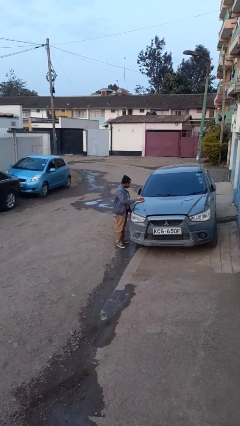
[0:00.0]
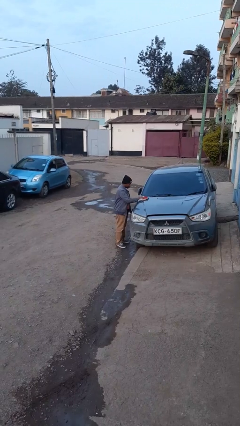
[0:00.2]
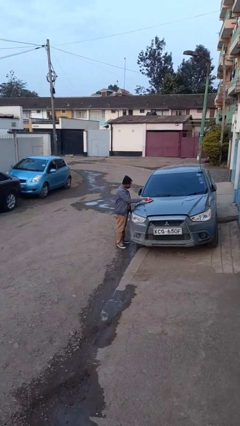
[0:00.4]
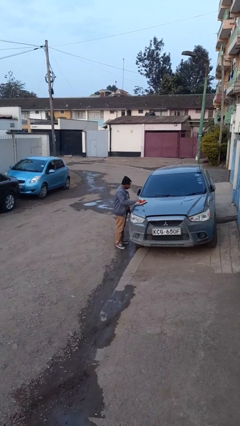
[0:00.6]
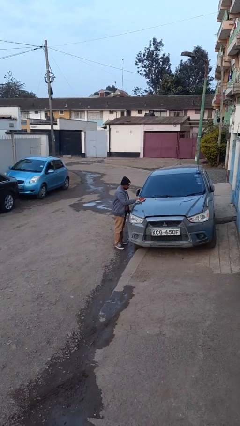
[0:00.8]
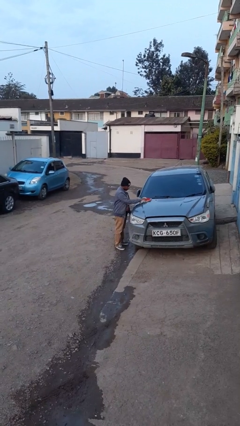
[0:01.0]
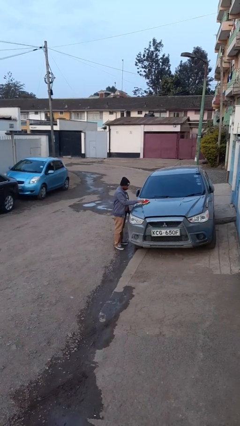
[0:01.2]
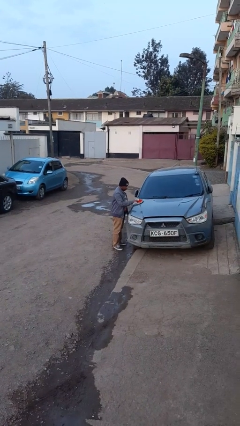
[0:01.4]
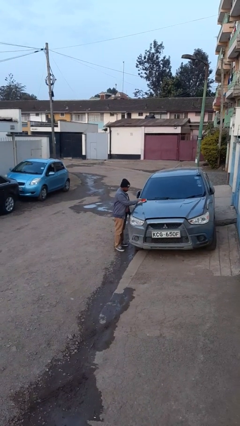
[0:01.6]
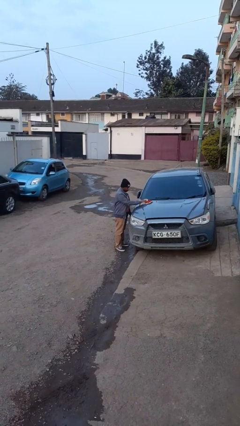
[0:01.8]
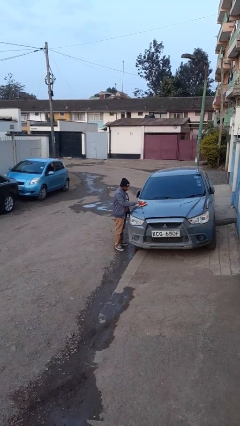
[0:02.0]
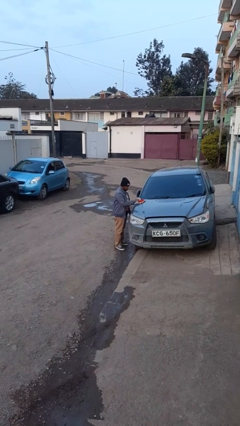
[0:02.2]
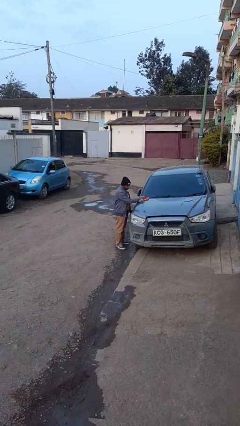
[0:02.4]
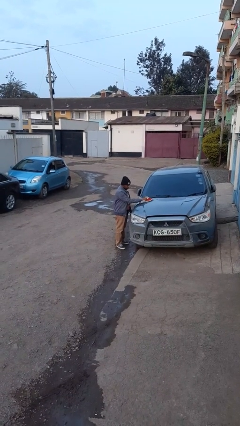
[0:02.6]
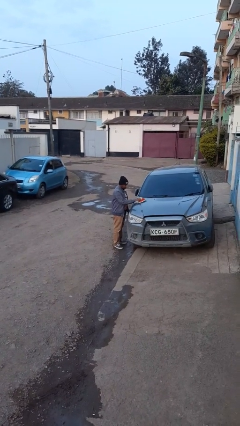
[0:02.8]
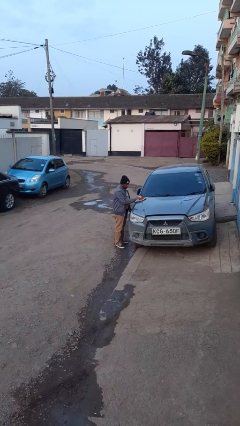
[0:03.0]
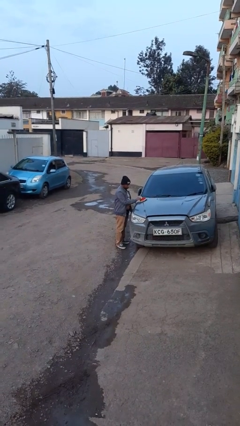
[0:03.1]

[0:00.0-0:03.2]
person polishes car with rag

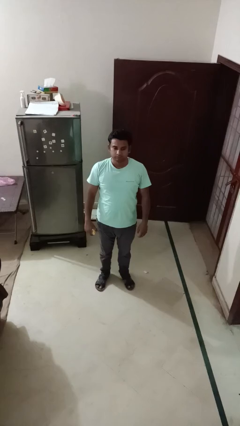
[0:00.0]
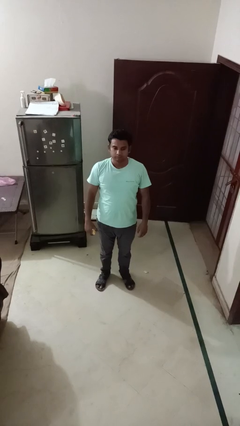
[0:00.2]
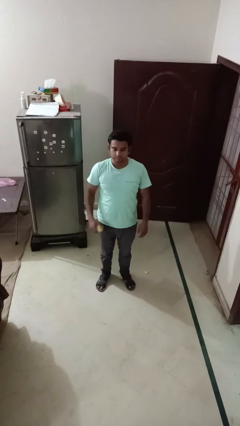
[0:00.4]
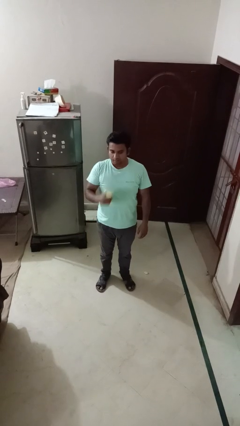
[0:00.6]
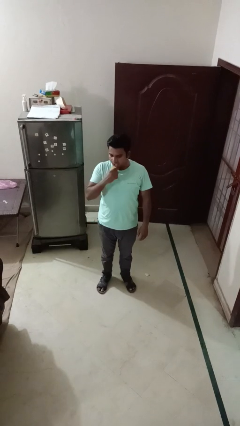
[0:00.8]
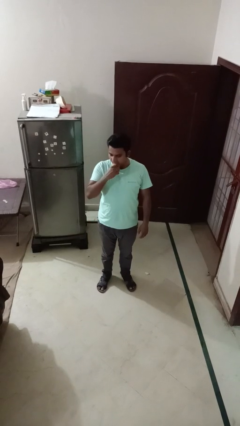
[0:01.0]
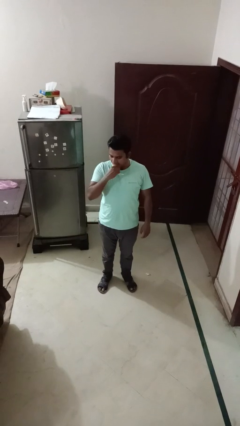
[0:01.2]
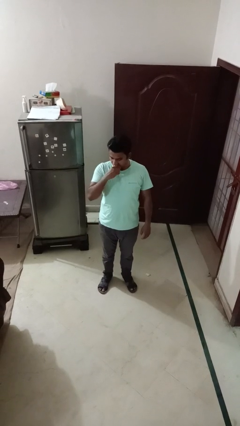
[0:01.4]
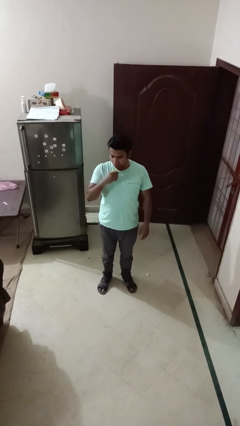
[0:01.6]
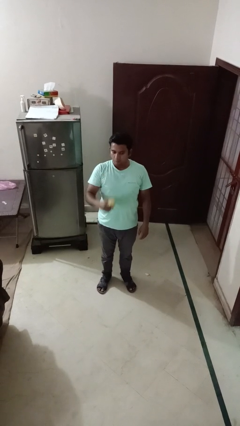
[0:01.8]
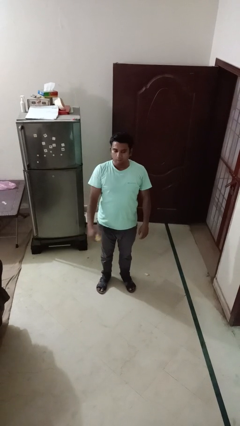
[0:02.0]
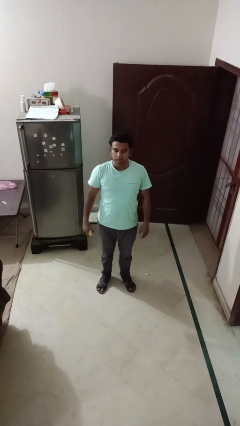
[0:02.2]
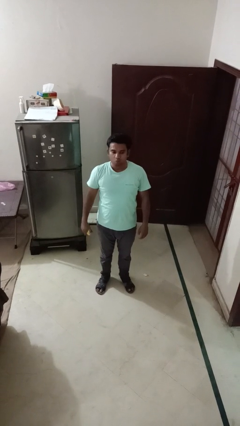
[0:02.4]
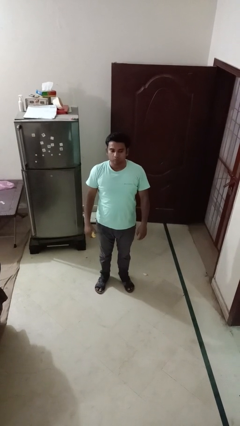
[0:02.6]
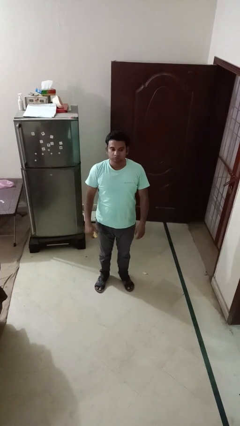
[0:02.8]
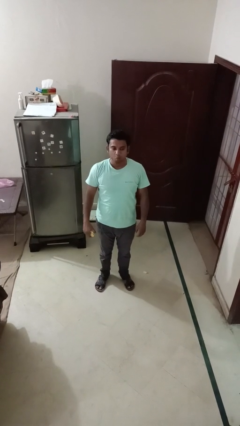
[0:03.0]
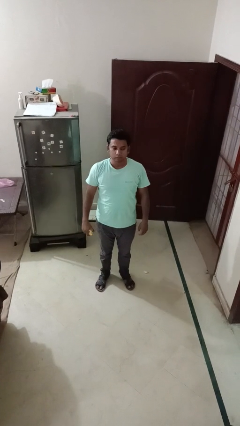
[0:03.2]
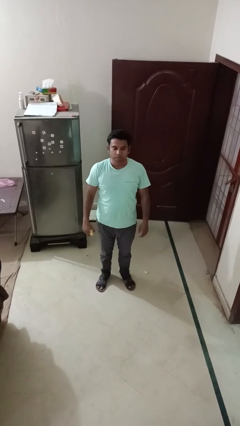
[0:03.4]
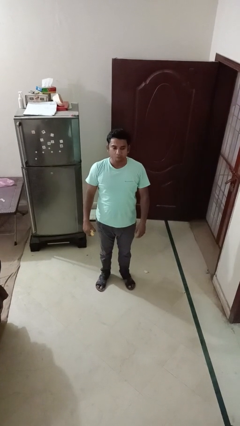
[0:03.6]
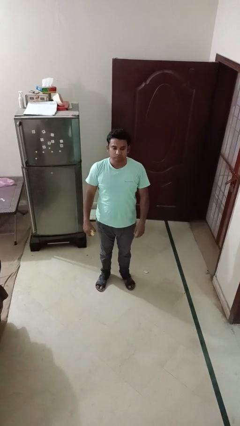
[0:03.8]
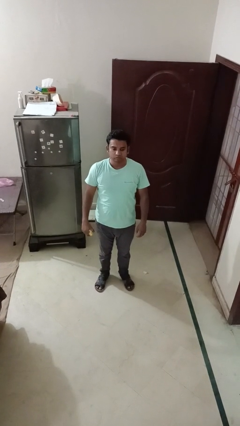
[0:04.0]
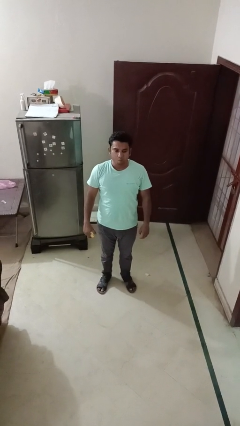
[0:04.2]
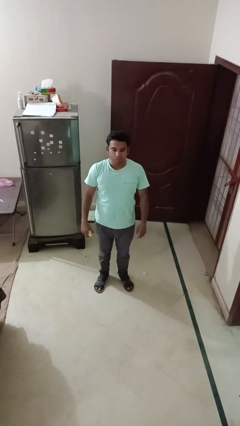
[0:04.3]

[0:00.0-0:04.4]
person eats apple

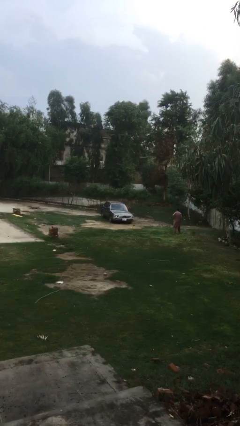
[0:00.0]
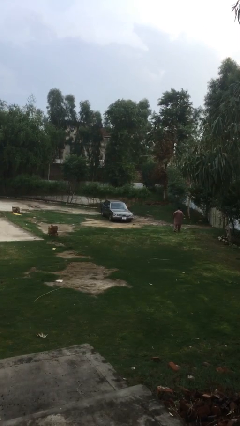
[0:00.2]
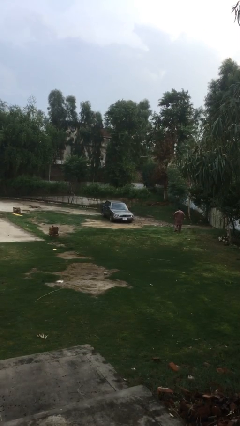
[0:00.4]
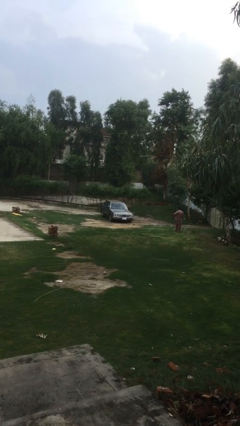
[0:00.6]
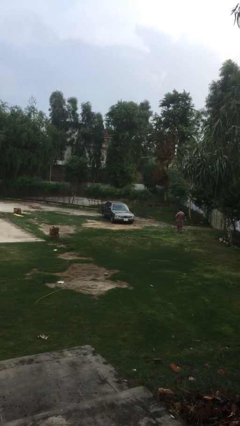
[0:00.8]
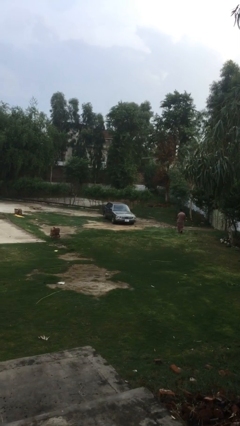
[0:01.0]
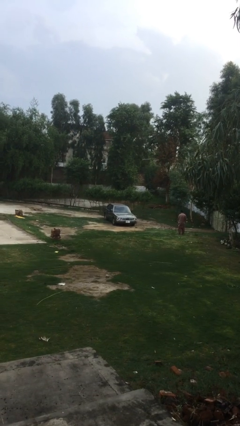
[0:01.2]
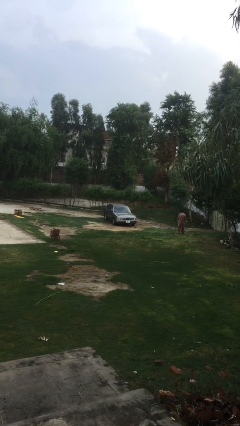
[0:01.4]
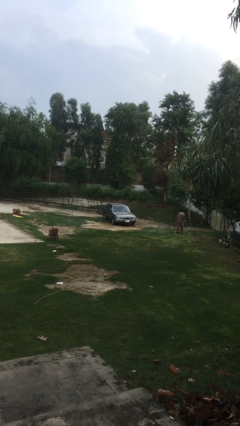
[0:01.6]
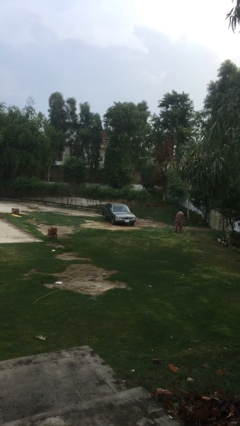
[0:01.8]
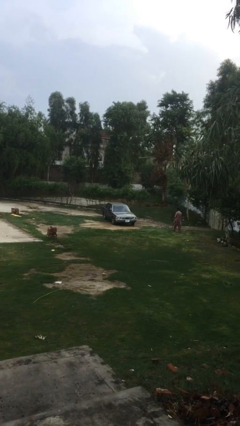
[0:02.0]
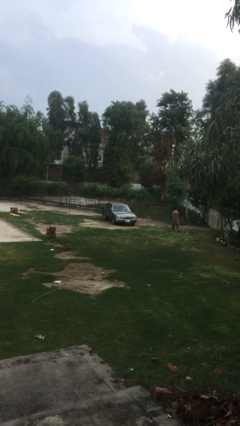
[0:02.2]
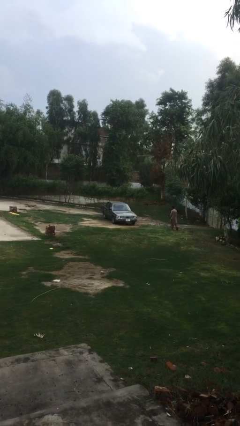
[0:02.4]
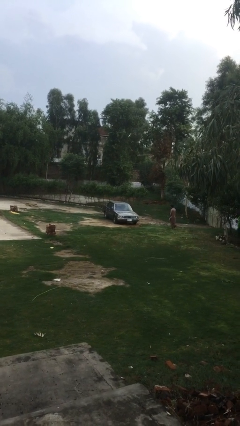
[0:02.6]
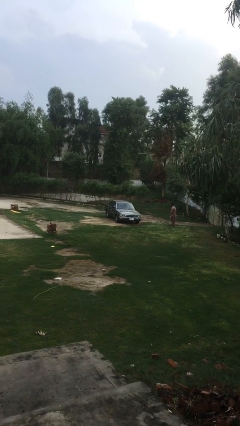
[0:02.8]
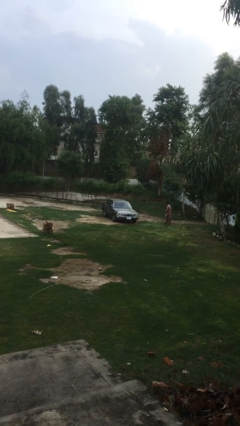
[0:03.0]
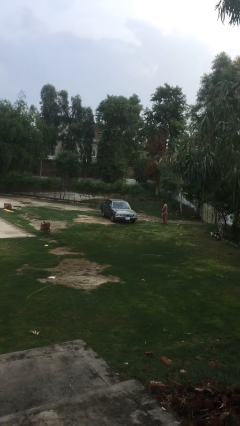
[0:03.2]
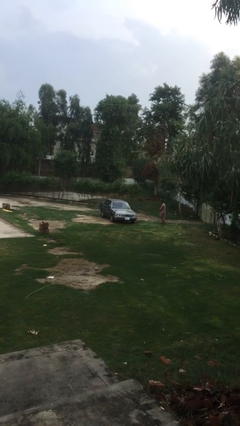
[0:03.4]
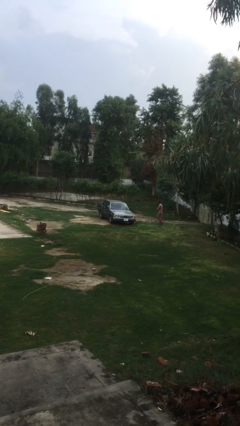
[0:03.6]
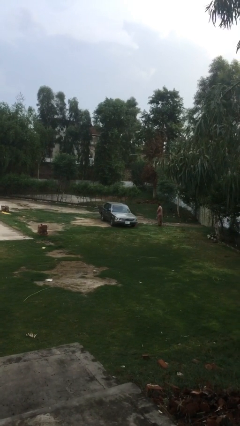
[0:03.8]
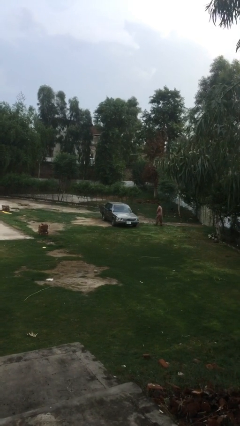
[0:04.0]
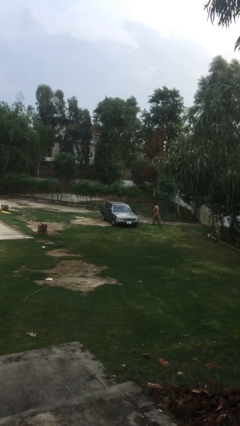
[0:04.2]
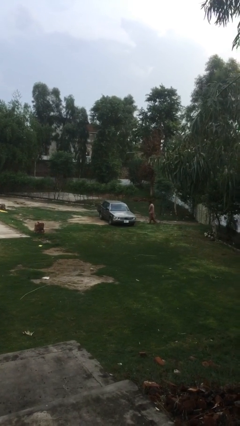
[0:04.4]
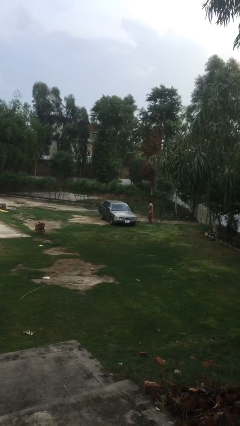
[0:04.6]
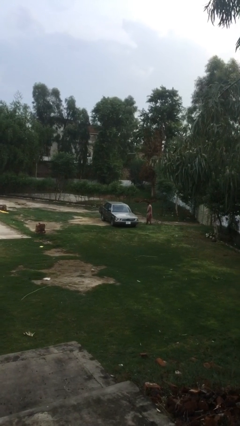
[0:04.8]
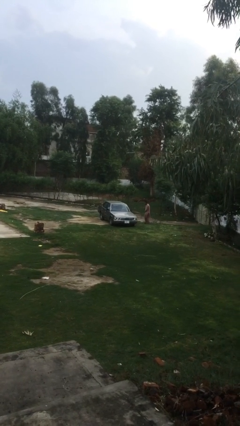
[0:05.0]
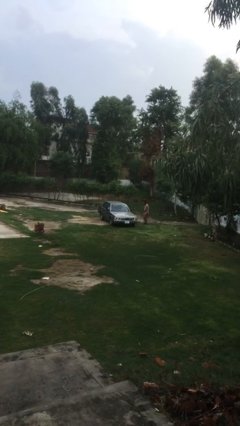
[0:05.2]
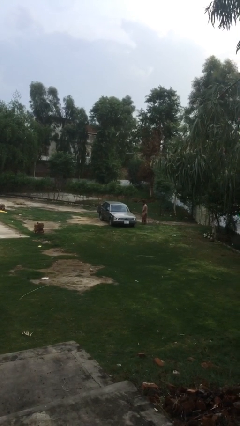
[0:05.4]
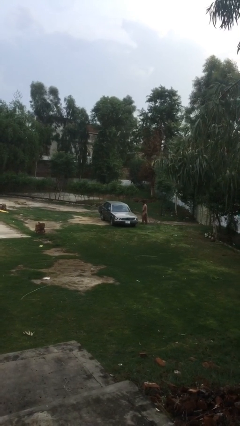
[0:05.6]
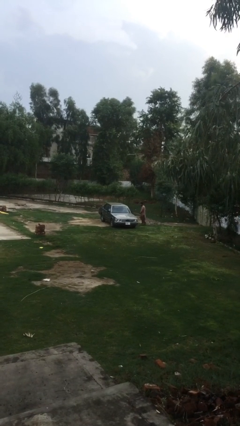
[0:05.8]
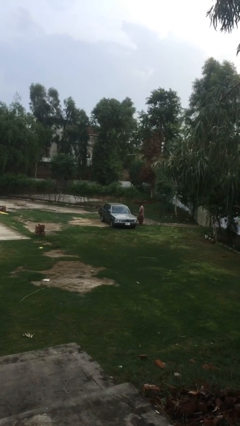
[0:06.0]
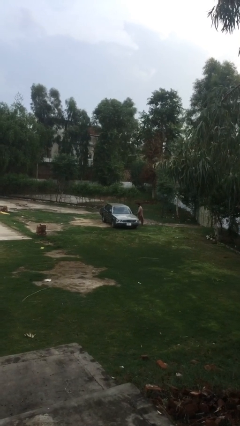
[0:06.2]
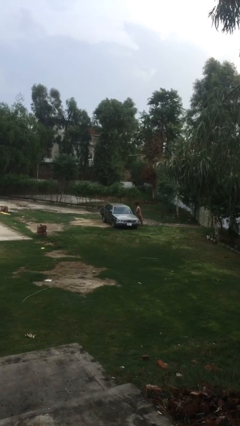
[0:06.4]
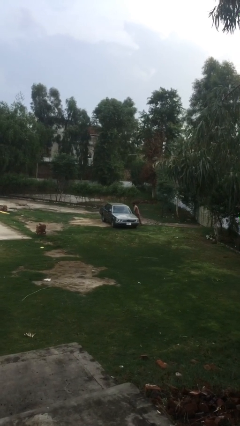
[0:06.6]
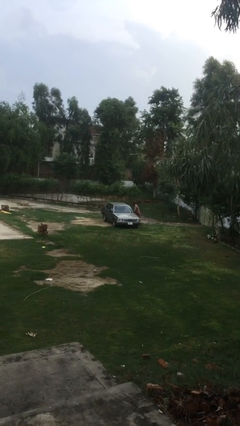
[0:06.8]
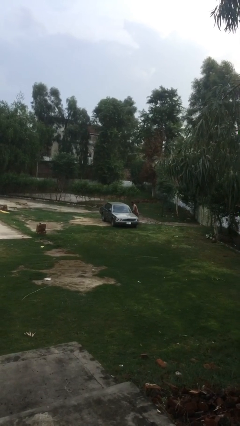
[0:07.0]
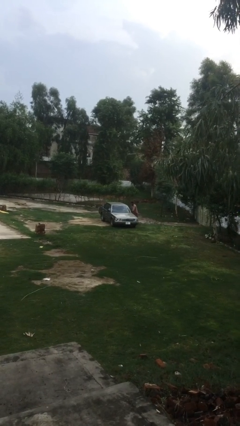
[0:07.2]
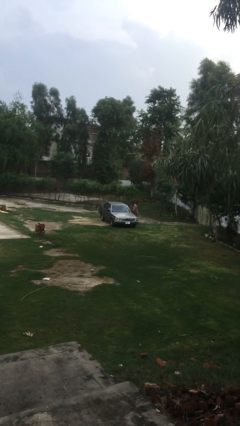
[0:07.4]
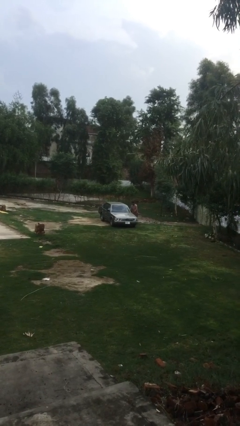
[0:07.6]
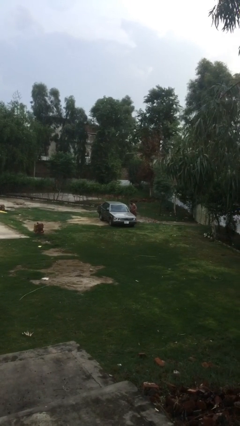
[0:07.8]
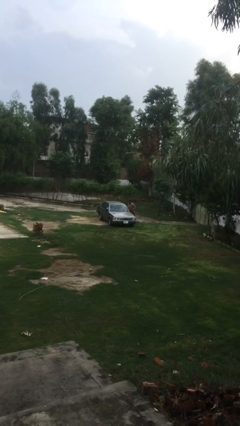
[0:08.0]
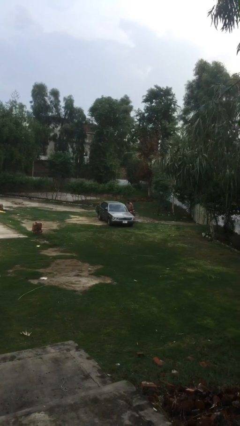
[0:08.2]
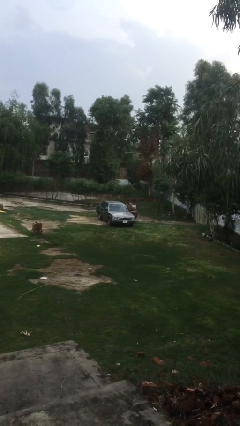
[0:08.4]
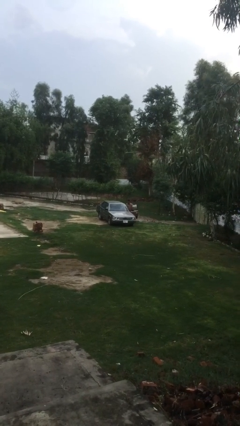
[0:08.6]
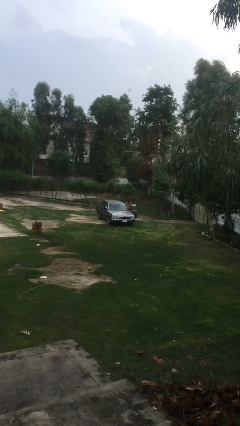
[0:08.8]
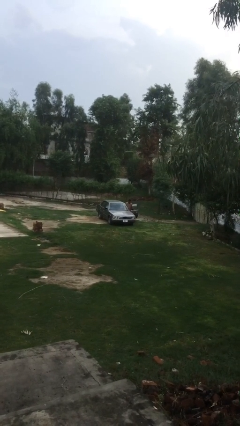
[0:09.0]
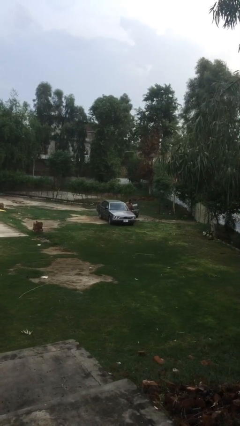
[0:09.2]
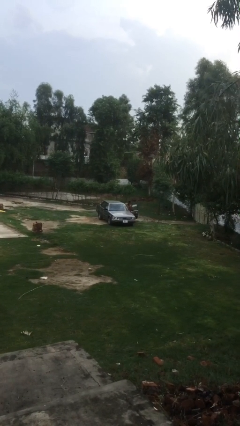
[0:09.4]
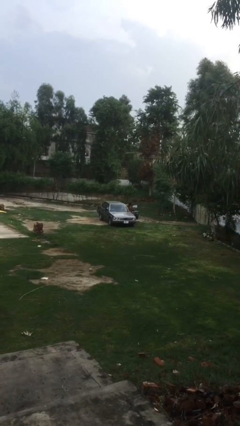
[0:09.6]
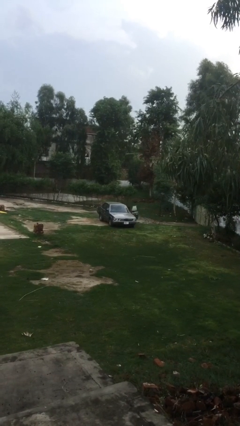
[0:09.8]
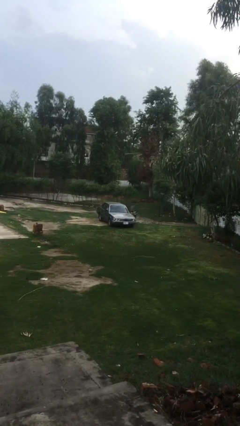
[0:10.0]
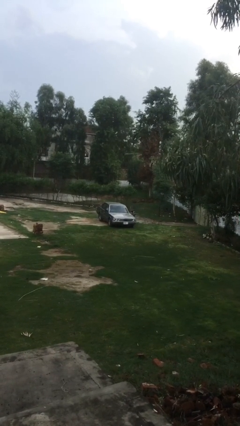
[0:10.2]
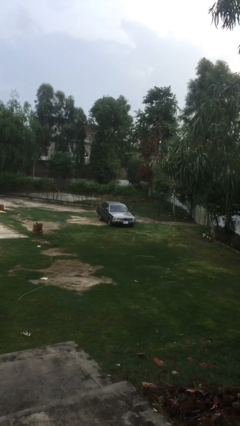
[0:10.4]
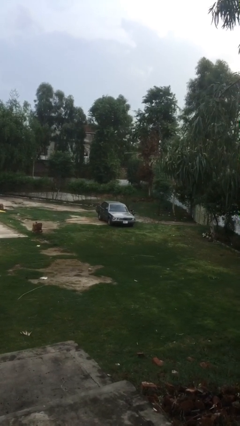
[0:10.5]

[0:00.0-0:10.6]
car picks up person
